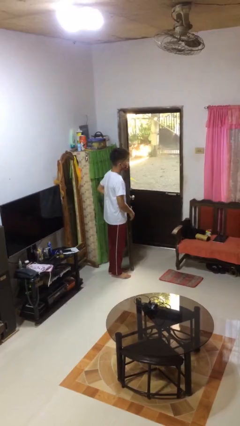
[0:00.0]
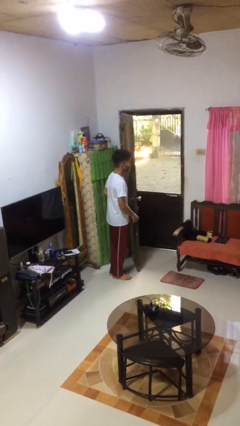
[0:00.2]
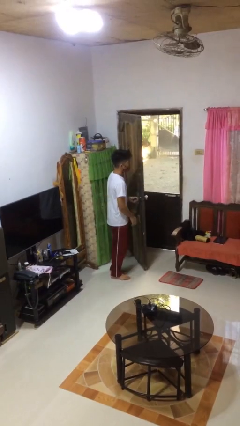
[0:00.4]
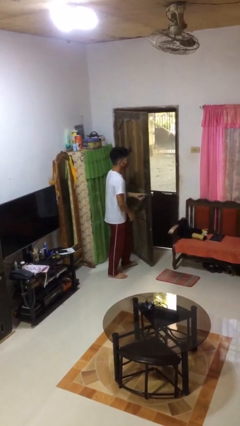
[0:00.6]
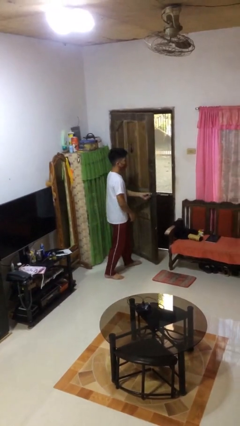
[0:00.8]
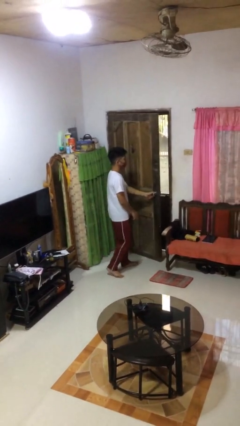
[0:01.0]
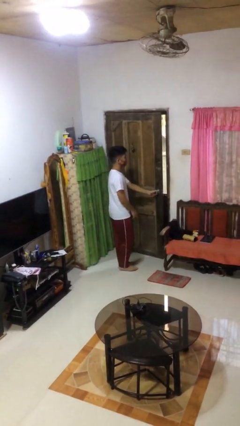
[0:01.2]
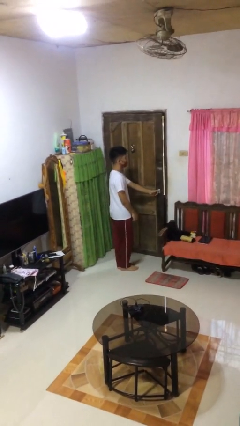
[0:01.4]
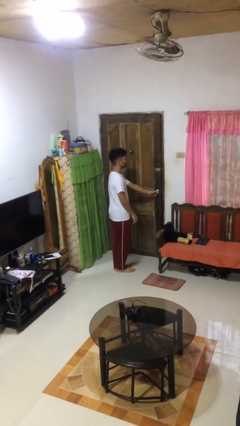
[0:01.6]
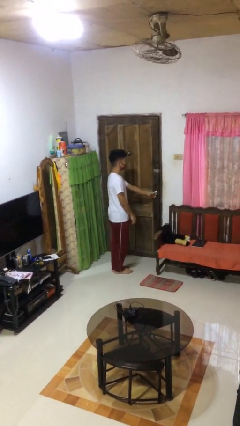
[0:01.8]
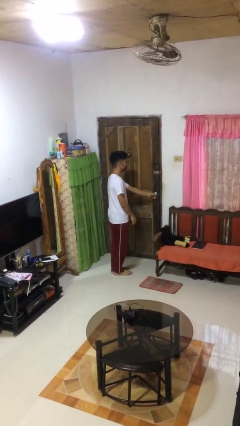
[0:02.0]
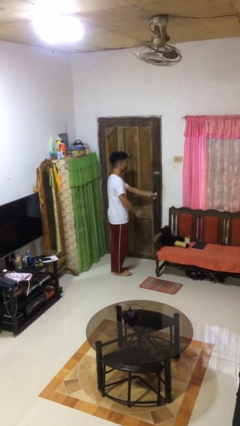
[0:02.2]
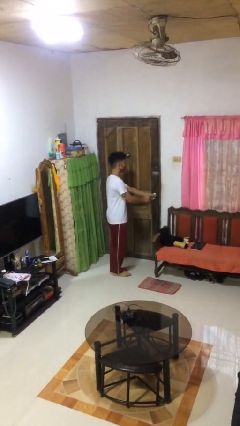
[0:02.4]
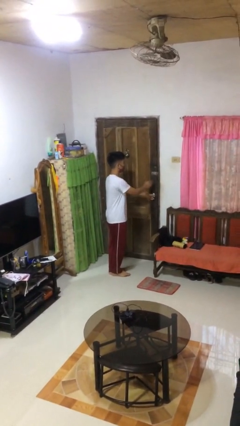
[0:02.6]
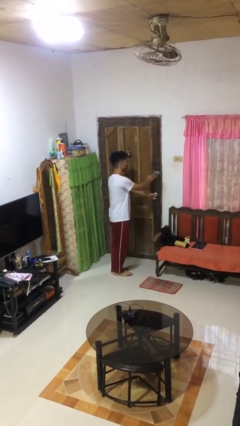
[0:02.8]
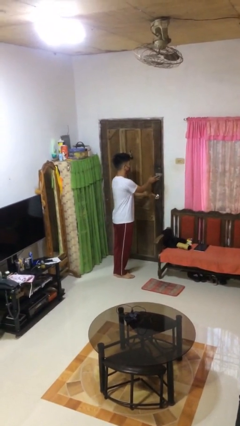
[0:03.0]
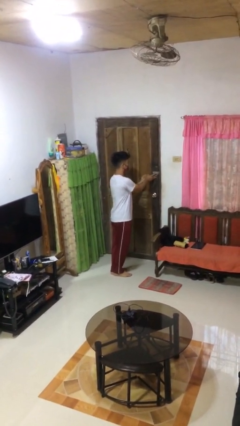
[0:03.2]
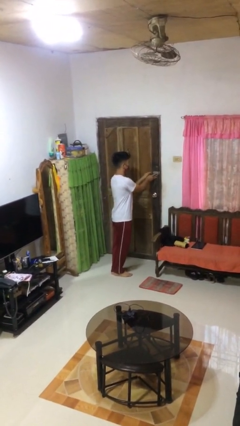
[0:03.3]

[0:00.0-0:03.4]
person closes facility door

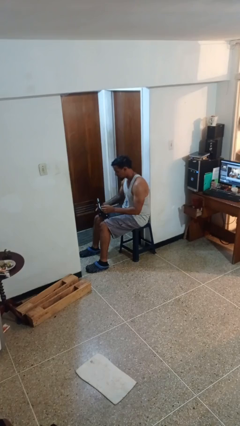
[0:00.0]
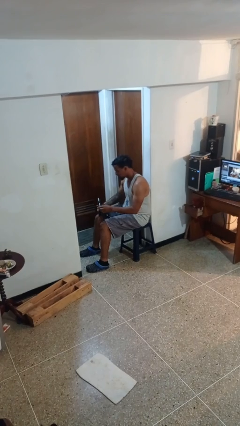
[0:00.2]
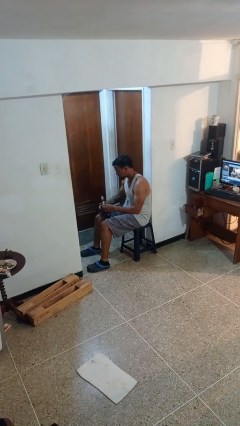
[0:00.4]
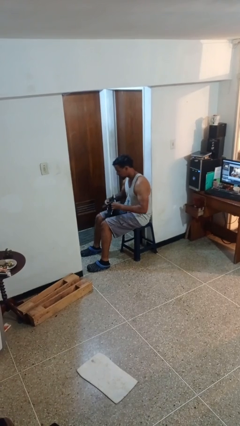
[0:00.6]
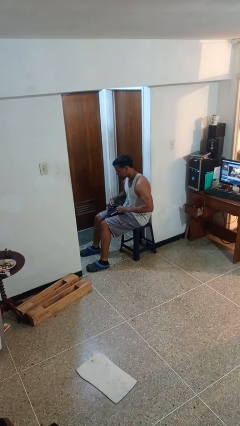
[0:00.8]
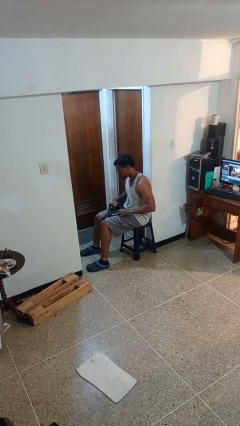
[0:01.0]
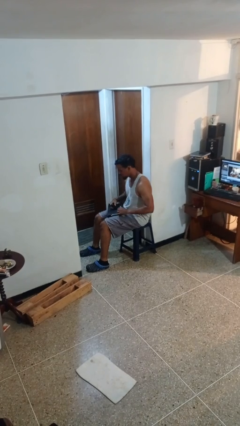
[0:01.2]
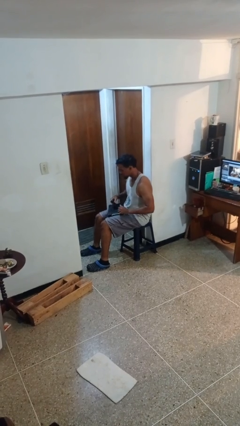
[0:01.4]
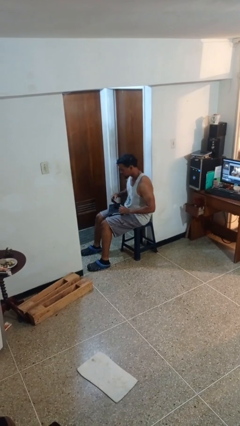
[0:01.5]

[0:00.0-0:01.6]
person closes laptop

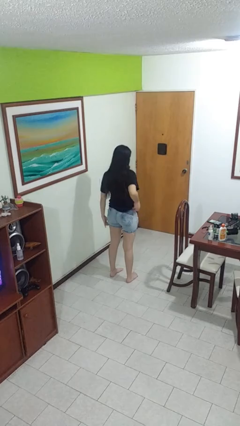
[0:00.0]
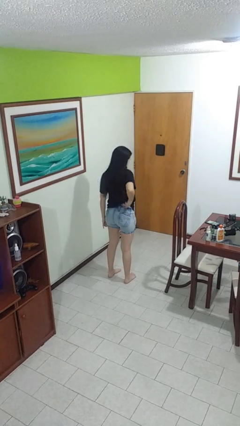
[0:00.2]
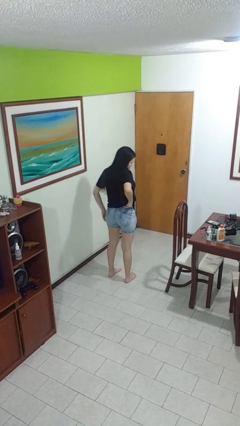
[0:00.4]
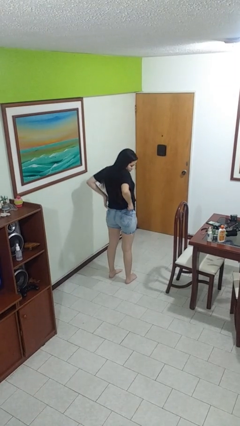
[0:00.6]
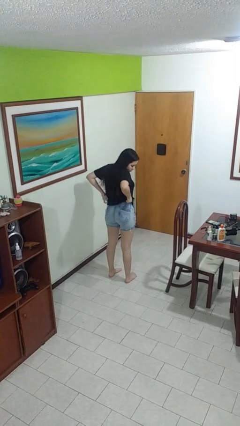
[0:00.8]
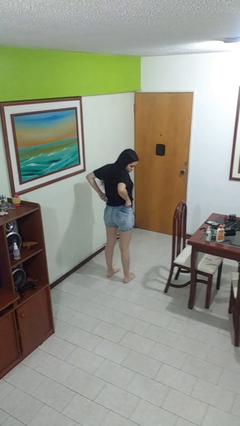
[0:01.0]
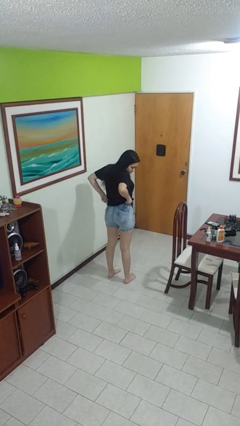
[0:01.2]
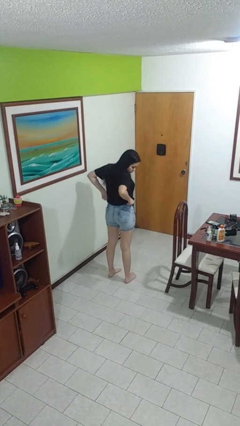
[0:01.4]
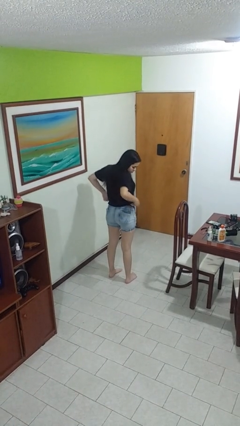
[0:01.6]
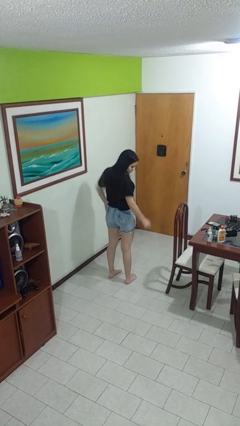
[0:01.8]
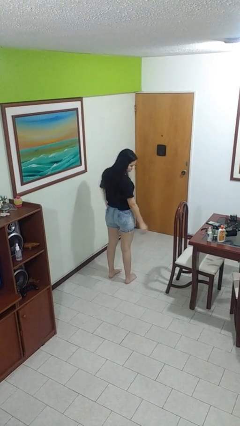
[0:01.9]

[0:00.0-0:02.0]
person hikes up pants

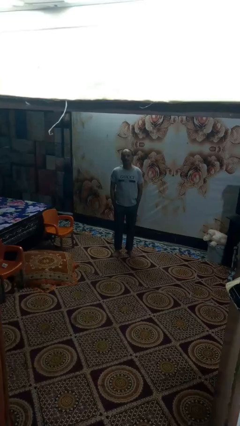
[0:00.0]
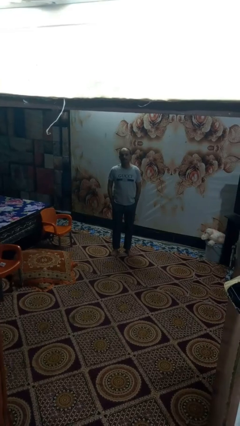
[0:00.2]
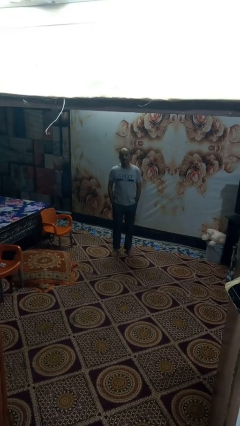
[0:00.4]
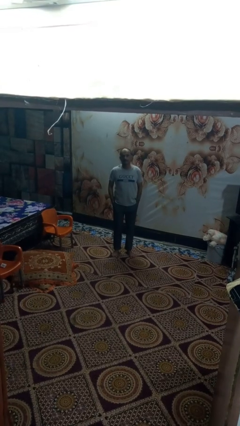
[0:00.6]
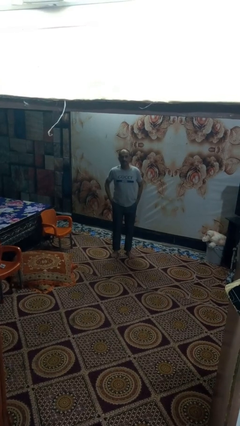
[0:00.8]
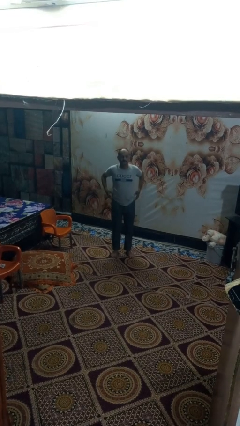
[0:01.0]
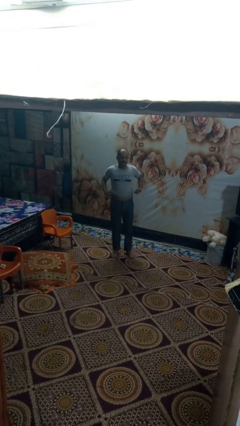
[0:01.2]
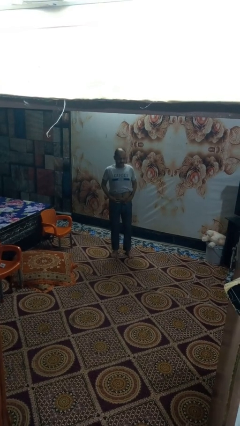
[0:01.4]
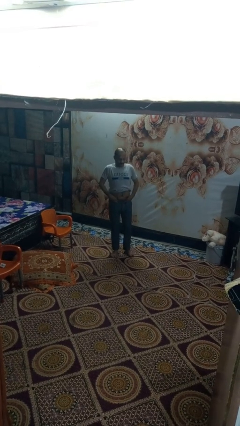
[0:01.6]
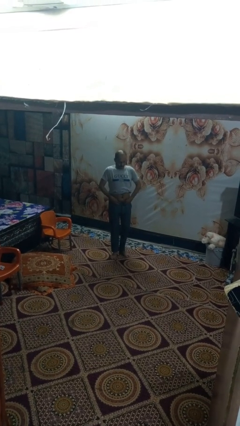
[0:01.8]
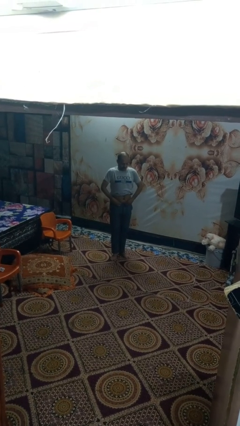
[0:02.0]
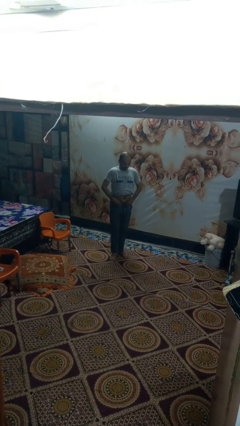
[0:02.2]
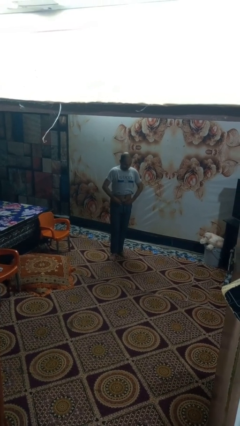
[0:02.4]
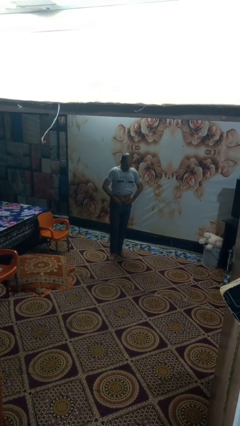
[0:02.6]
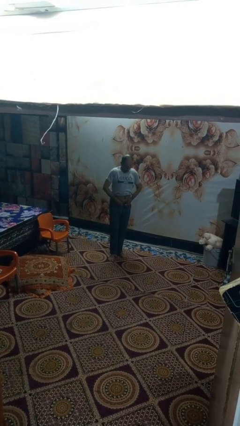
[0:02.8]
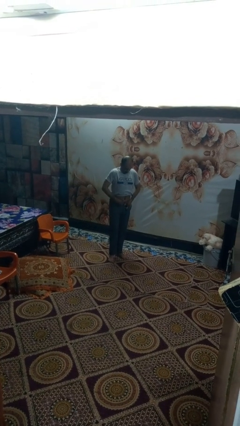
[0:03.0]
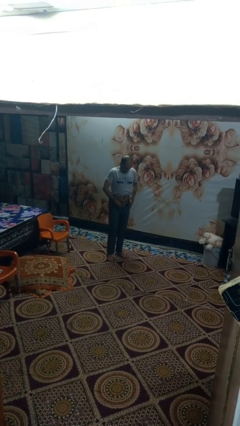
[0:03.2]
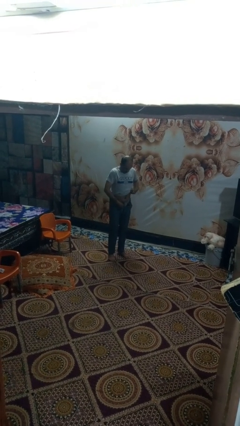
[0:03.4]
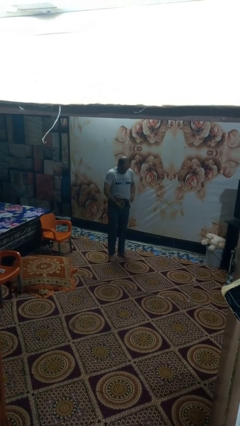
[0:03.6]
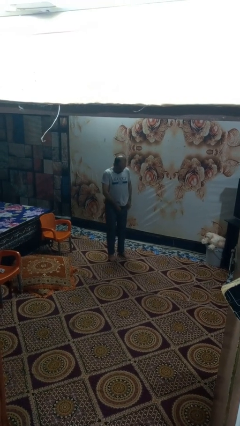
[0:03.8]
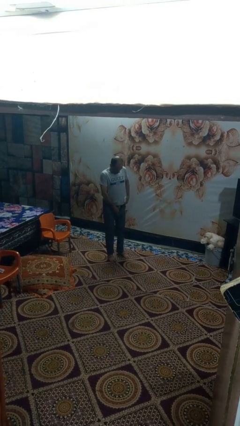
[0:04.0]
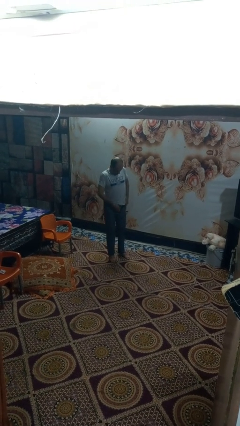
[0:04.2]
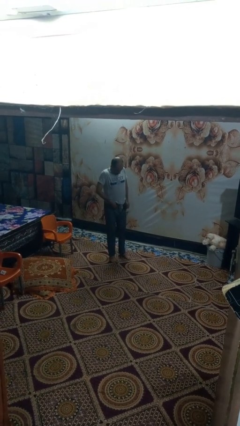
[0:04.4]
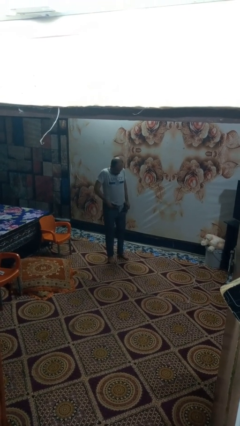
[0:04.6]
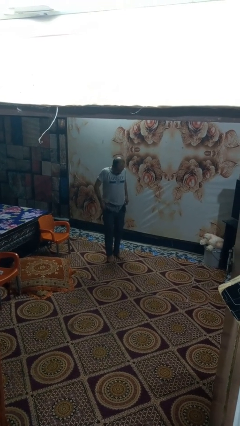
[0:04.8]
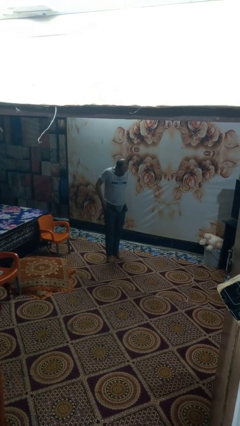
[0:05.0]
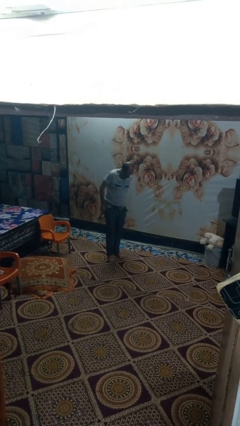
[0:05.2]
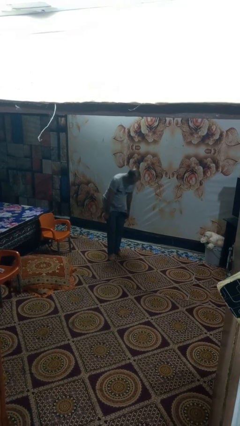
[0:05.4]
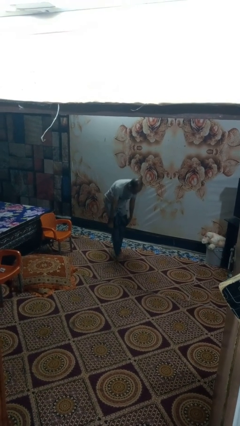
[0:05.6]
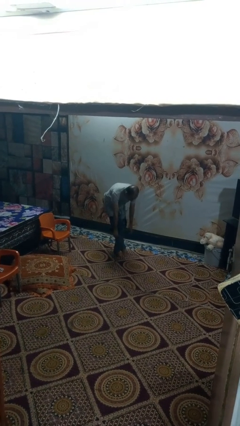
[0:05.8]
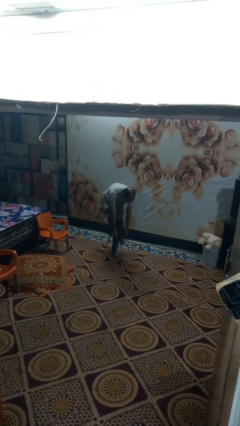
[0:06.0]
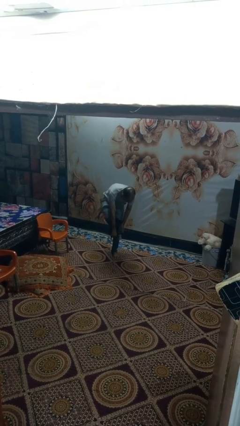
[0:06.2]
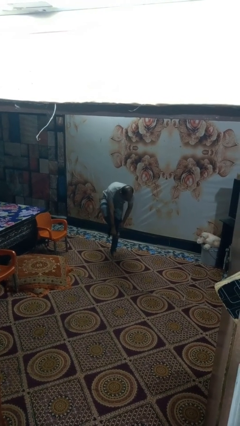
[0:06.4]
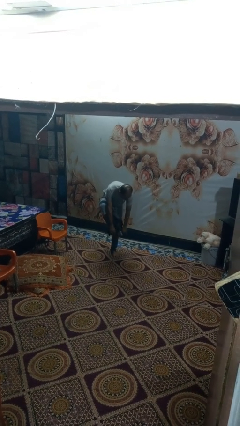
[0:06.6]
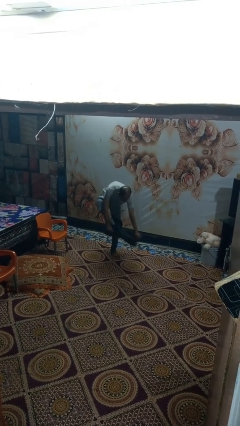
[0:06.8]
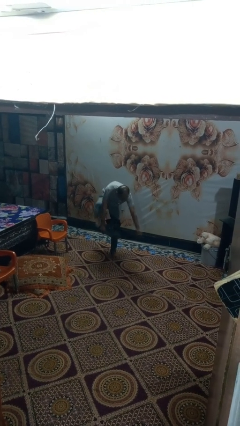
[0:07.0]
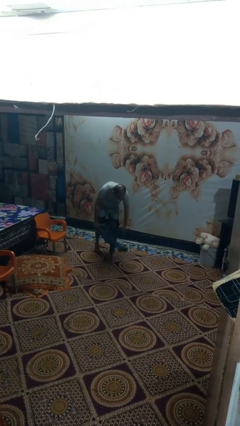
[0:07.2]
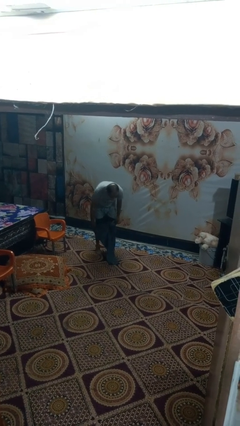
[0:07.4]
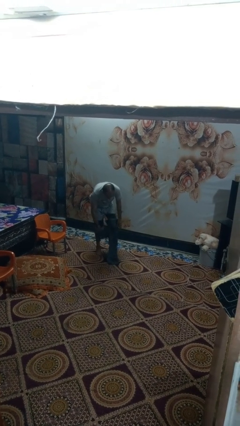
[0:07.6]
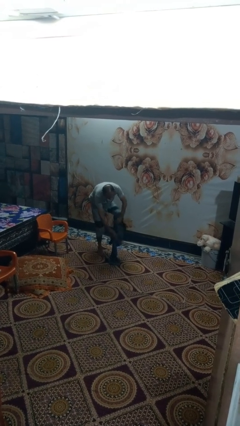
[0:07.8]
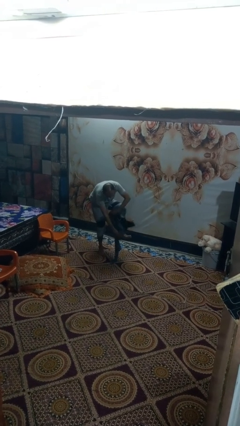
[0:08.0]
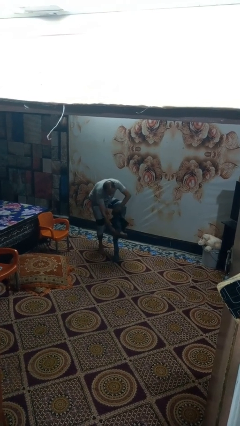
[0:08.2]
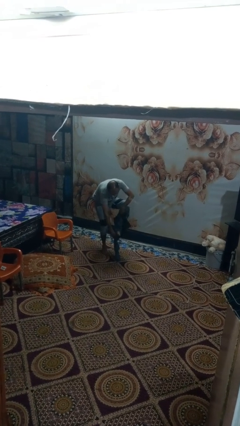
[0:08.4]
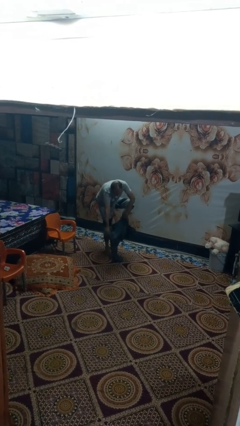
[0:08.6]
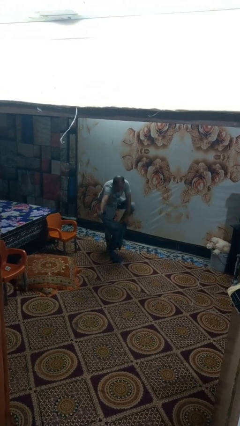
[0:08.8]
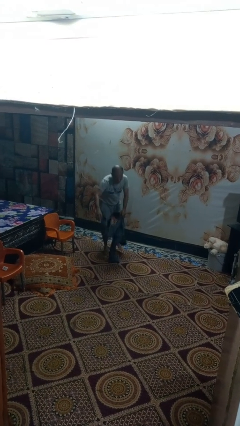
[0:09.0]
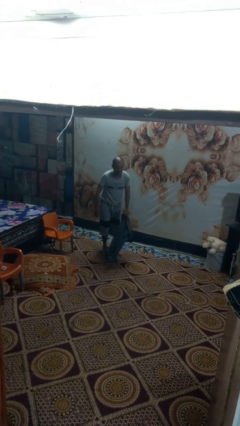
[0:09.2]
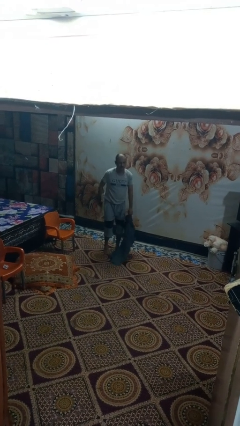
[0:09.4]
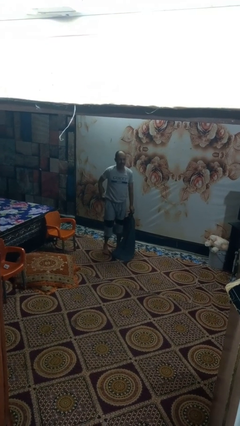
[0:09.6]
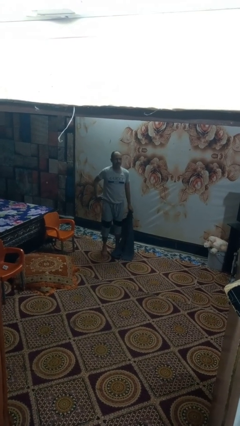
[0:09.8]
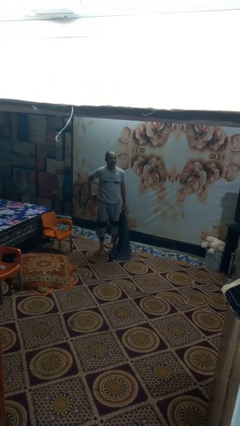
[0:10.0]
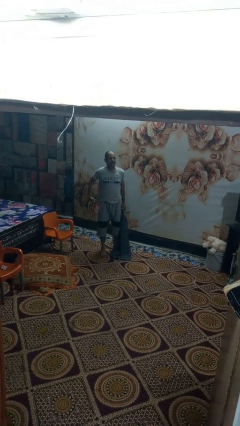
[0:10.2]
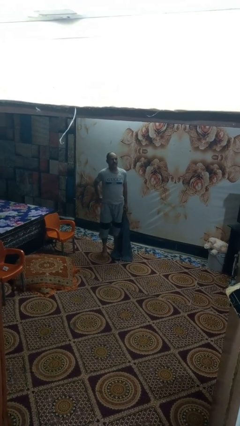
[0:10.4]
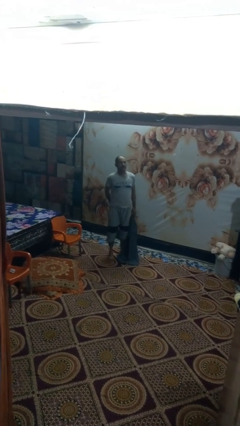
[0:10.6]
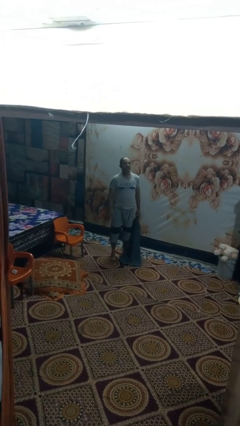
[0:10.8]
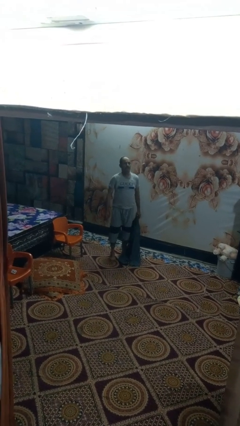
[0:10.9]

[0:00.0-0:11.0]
person takes off pants
